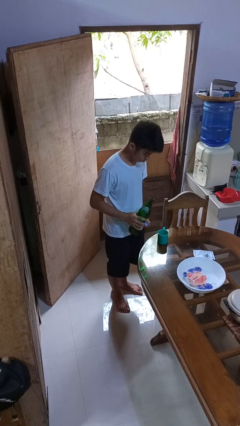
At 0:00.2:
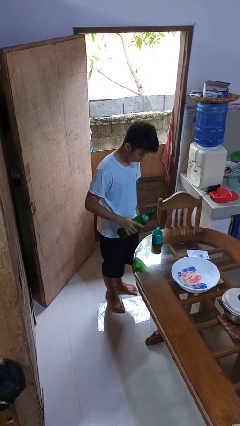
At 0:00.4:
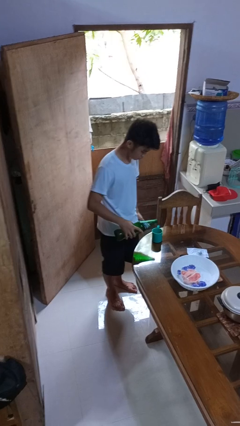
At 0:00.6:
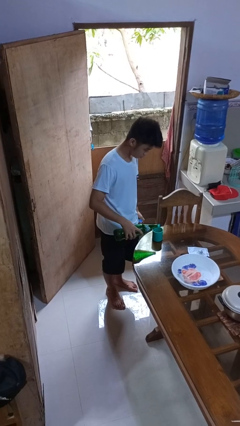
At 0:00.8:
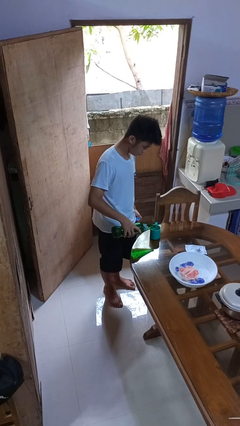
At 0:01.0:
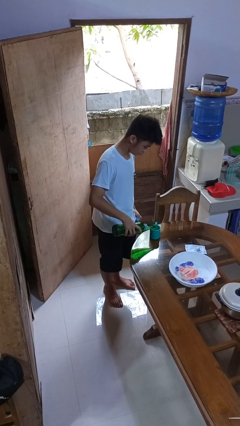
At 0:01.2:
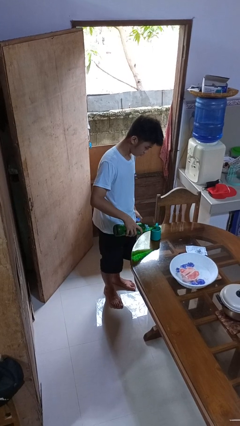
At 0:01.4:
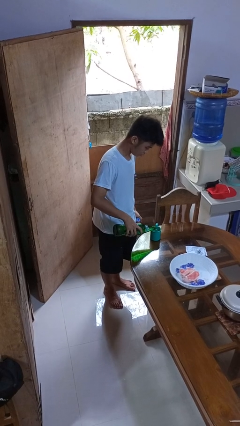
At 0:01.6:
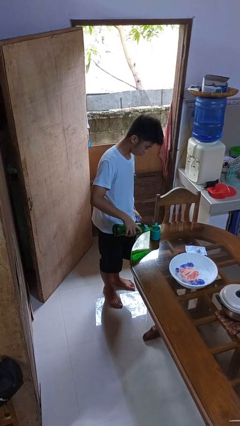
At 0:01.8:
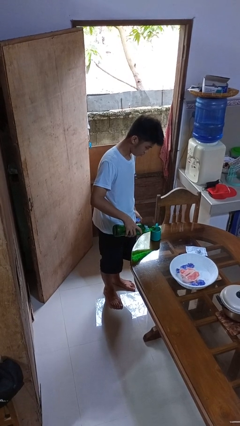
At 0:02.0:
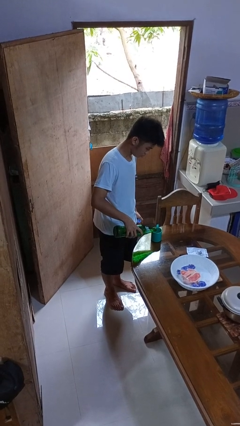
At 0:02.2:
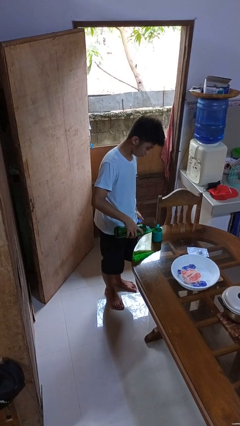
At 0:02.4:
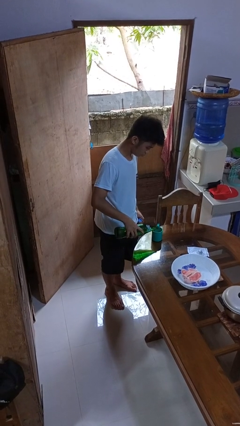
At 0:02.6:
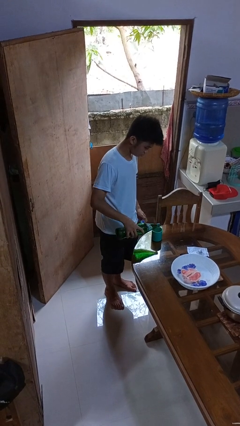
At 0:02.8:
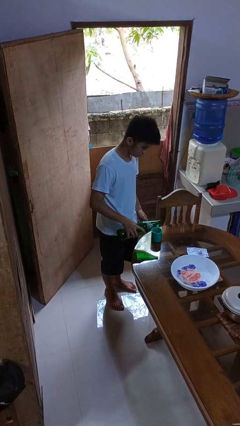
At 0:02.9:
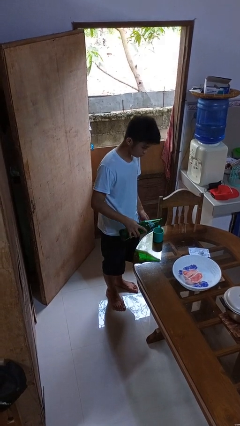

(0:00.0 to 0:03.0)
person pours liquid into cup

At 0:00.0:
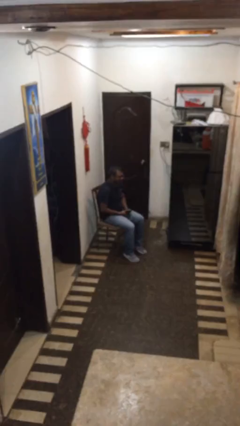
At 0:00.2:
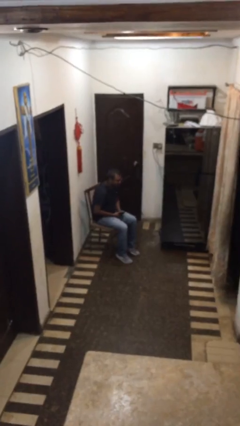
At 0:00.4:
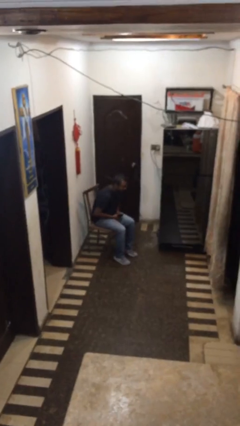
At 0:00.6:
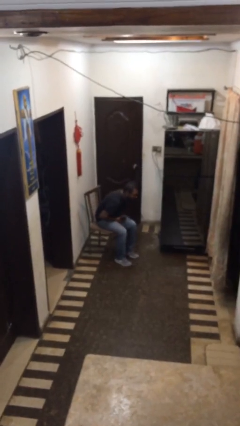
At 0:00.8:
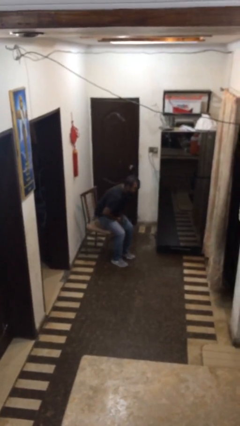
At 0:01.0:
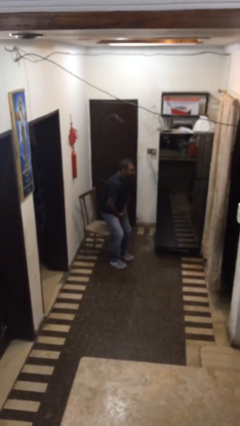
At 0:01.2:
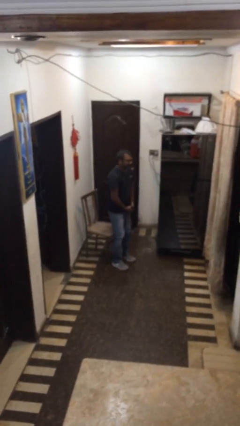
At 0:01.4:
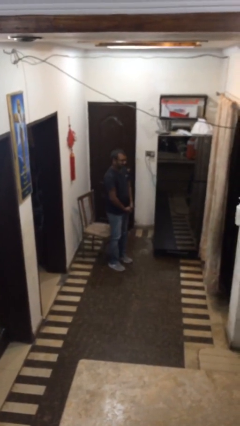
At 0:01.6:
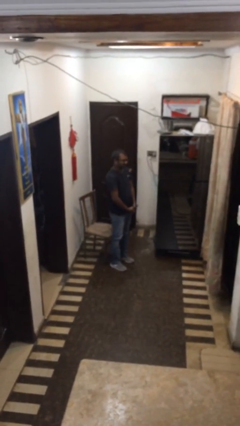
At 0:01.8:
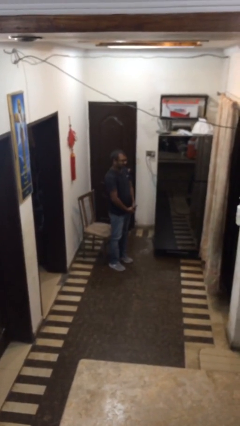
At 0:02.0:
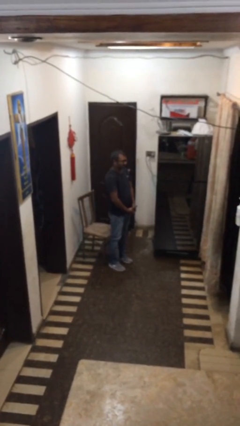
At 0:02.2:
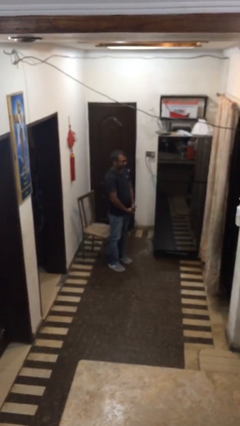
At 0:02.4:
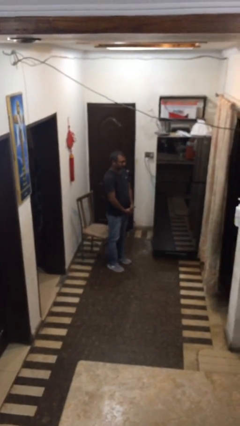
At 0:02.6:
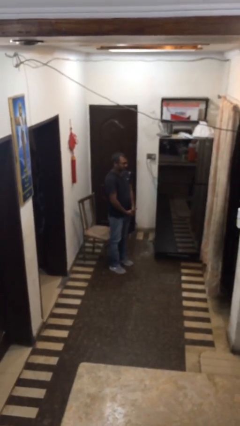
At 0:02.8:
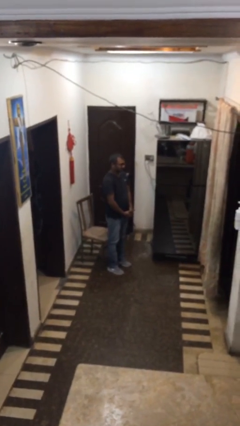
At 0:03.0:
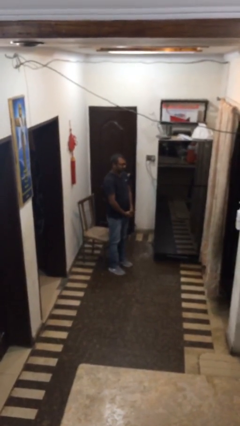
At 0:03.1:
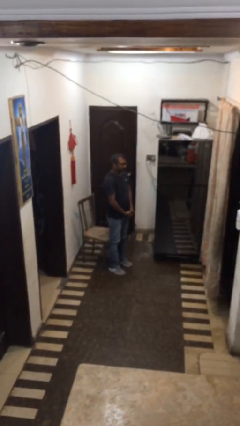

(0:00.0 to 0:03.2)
person stands up

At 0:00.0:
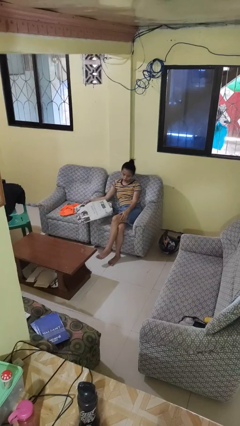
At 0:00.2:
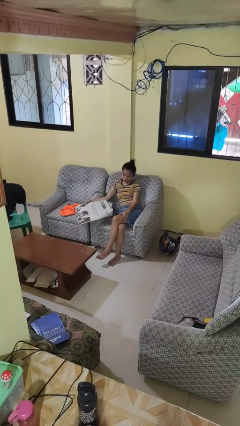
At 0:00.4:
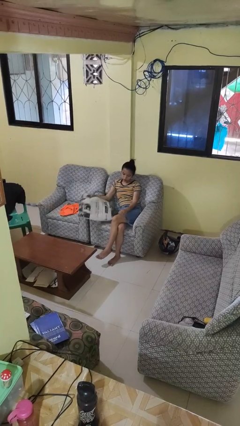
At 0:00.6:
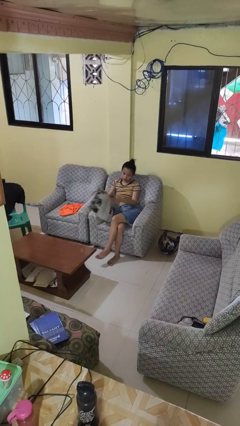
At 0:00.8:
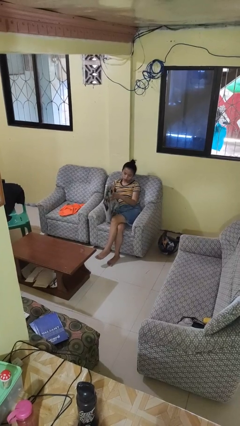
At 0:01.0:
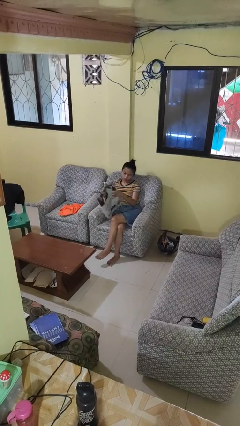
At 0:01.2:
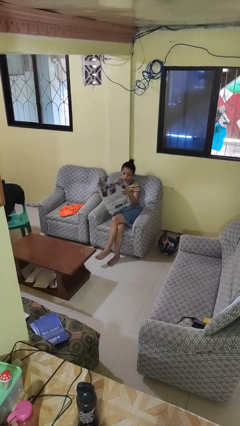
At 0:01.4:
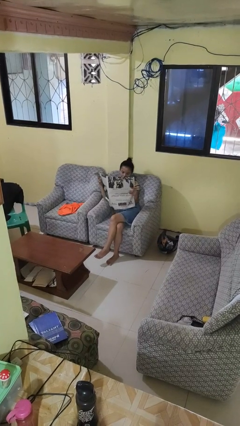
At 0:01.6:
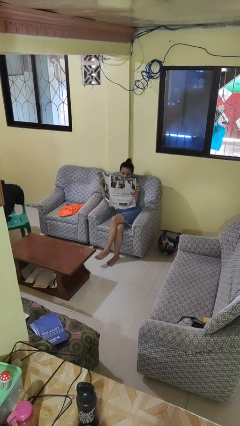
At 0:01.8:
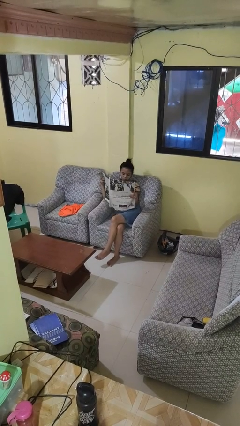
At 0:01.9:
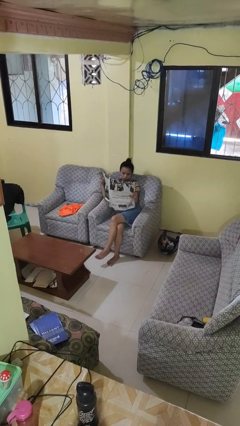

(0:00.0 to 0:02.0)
person reads newspaper

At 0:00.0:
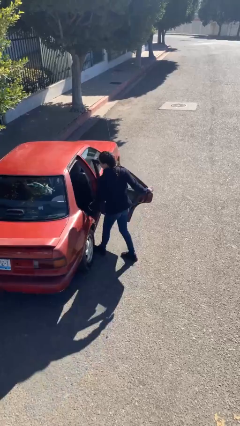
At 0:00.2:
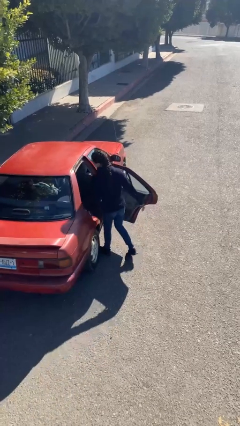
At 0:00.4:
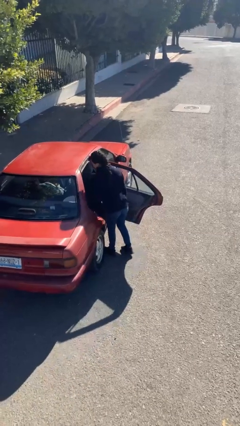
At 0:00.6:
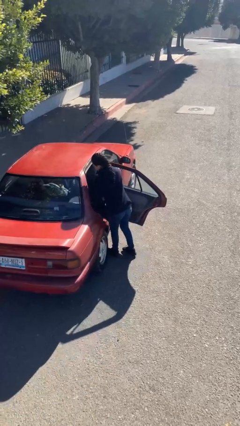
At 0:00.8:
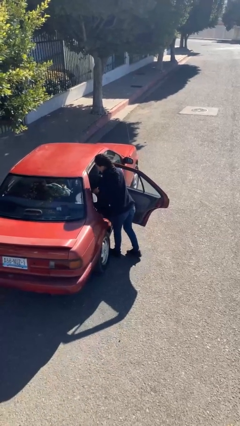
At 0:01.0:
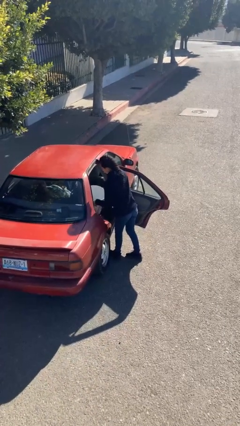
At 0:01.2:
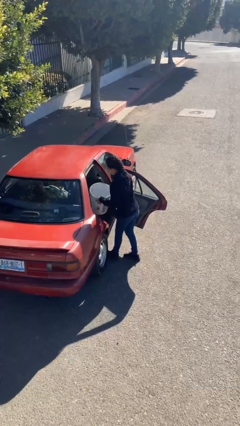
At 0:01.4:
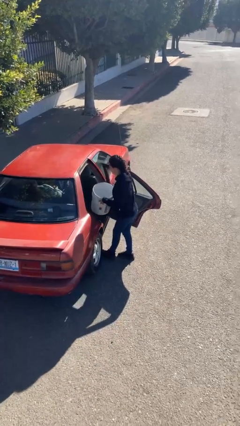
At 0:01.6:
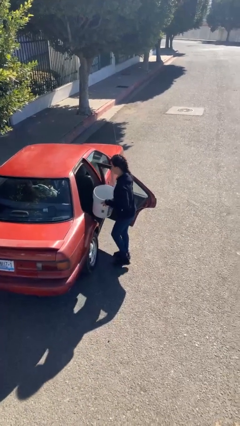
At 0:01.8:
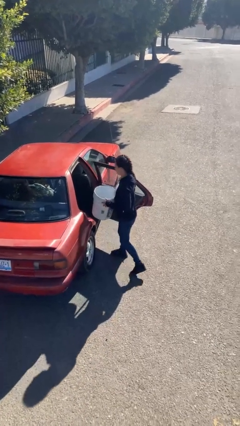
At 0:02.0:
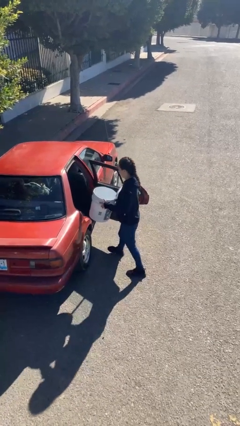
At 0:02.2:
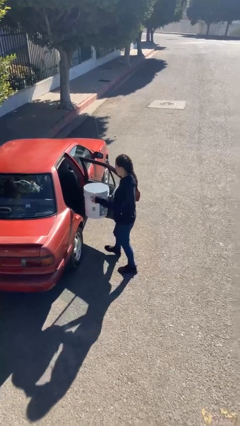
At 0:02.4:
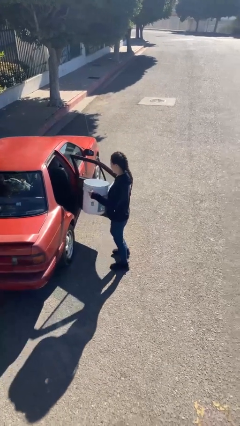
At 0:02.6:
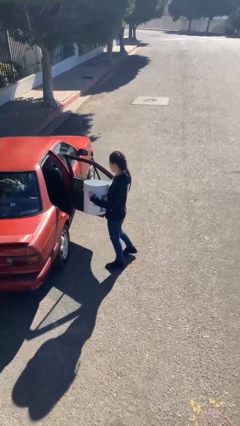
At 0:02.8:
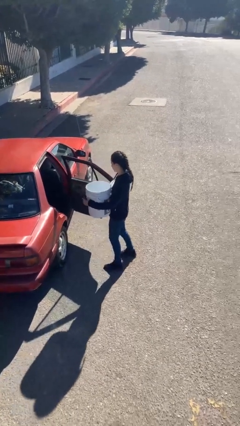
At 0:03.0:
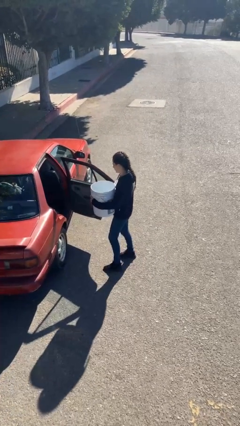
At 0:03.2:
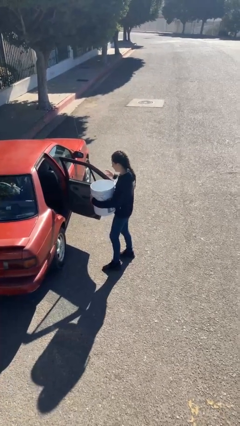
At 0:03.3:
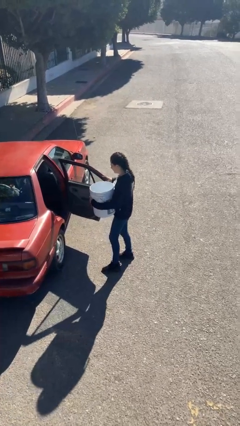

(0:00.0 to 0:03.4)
person unloads car

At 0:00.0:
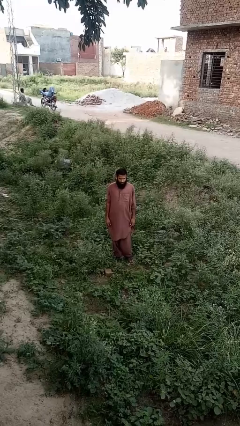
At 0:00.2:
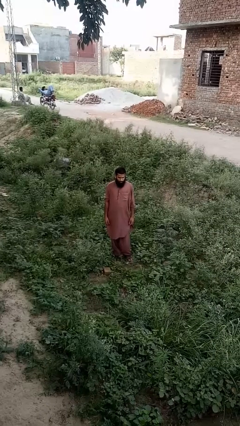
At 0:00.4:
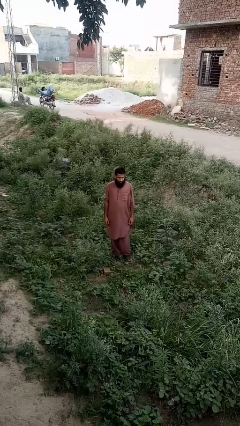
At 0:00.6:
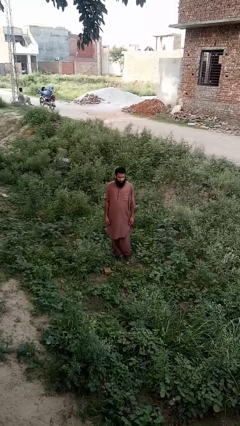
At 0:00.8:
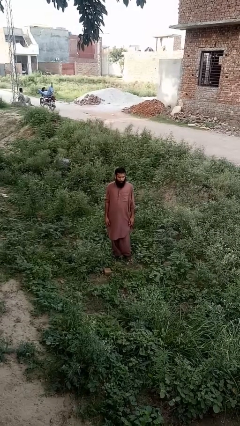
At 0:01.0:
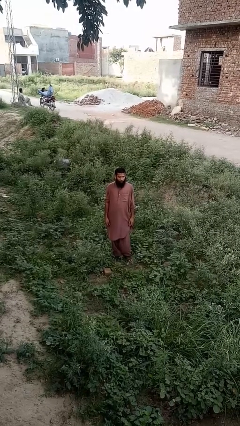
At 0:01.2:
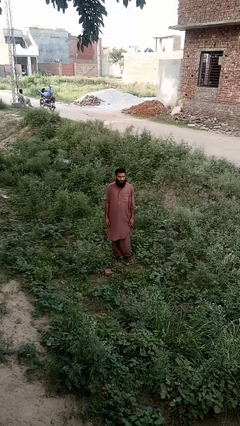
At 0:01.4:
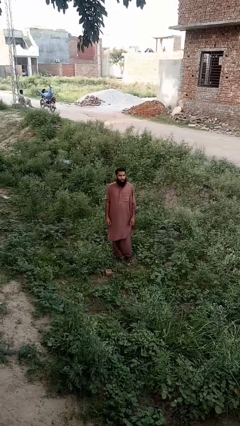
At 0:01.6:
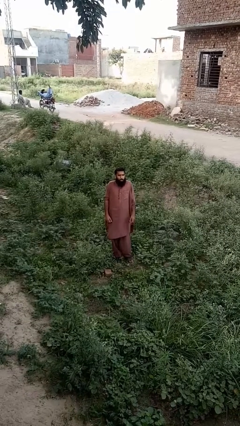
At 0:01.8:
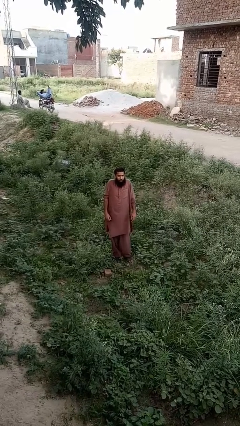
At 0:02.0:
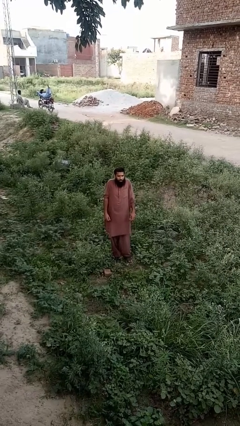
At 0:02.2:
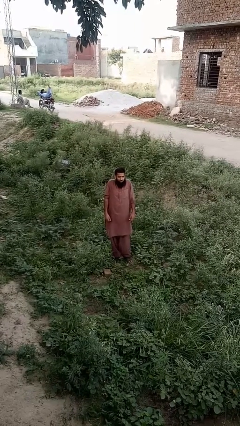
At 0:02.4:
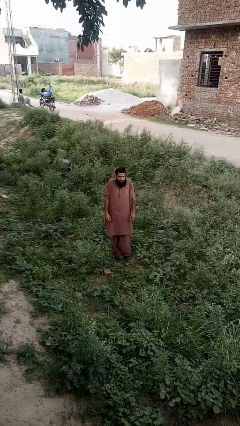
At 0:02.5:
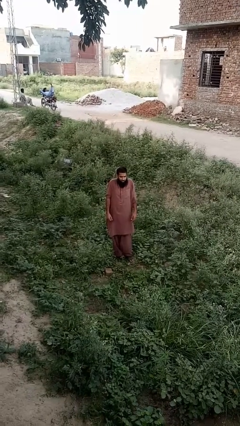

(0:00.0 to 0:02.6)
person shrugs

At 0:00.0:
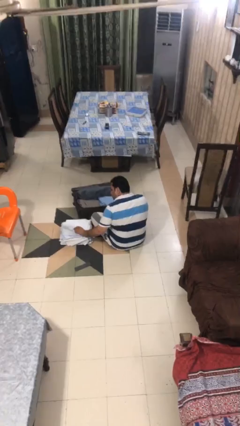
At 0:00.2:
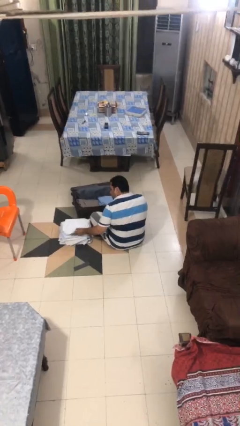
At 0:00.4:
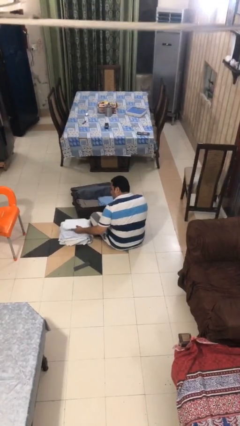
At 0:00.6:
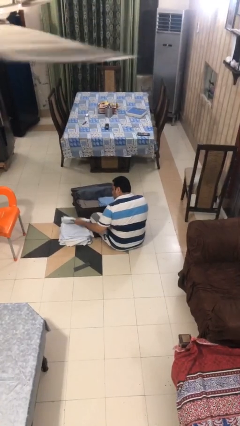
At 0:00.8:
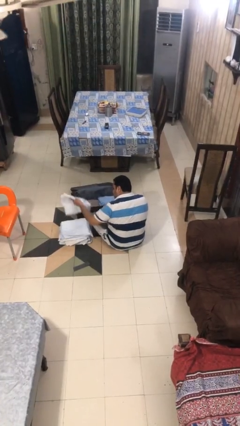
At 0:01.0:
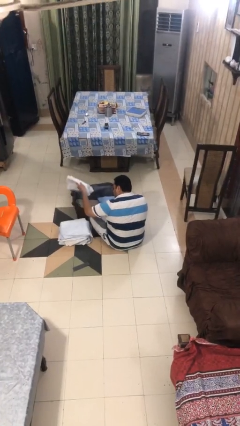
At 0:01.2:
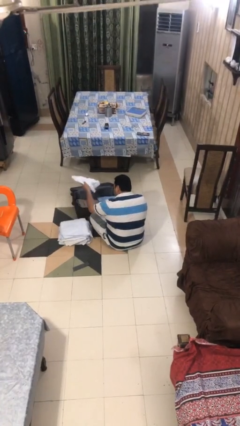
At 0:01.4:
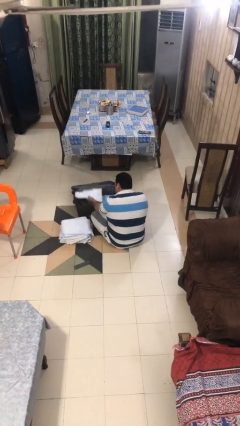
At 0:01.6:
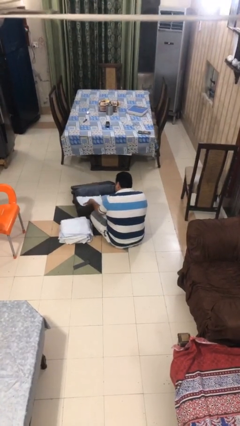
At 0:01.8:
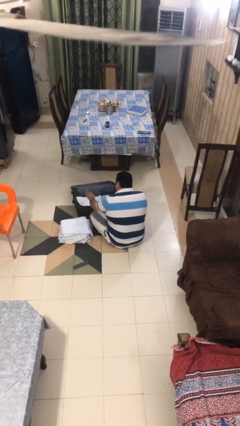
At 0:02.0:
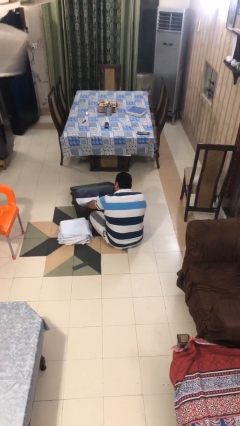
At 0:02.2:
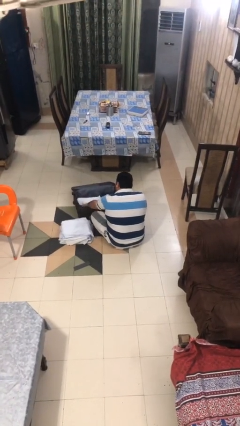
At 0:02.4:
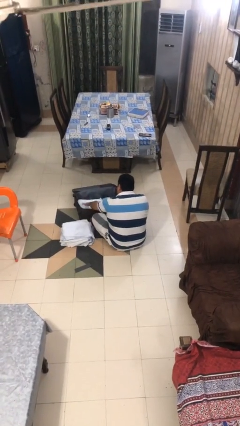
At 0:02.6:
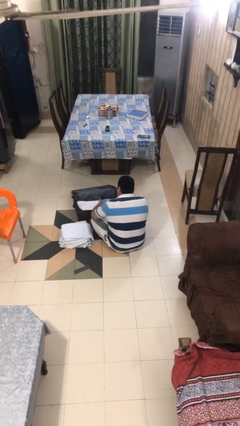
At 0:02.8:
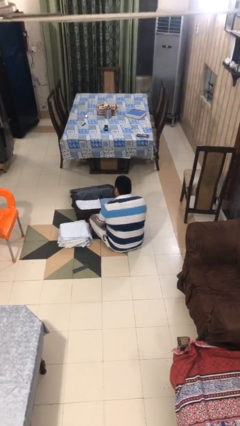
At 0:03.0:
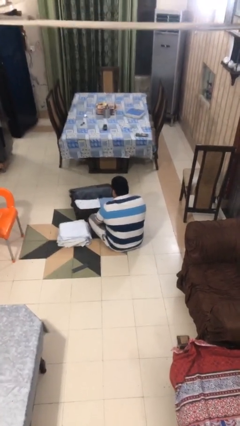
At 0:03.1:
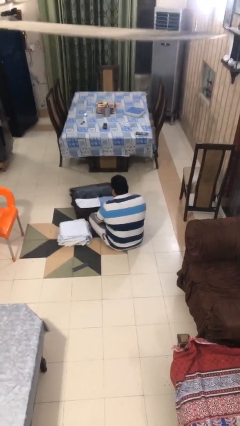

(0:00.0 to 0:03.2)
person loads clothes into suitcase

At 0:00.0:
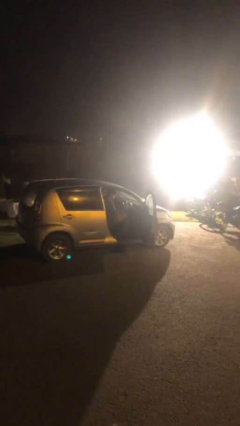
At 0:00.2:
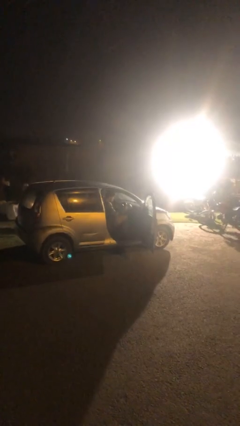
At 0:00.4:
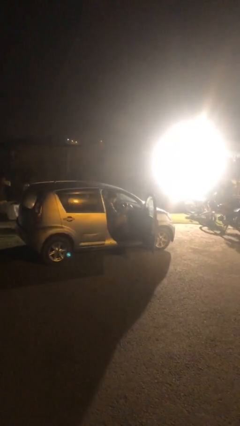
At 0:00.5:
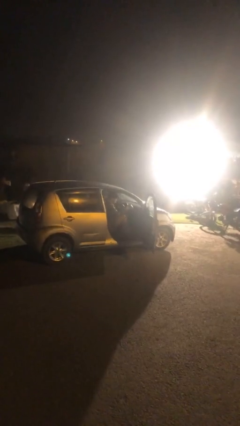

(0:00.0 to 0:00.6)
person exits car
